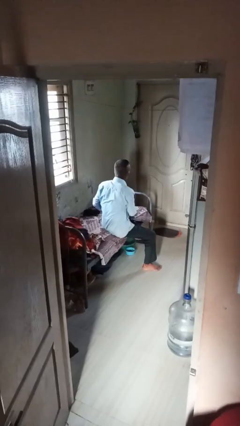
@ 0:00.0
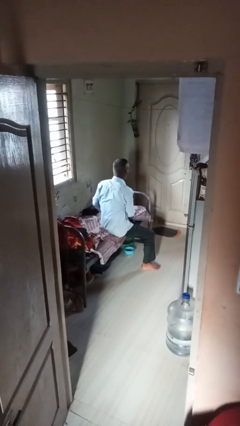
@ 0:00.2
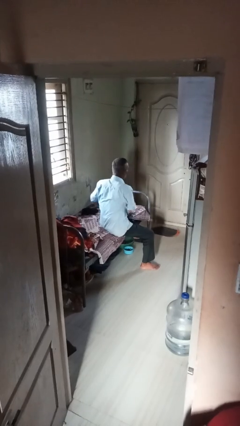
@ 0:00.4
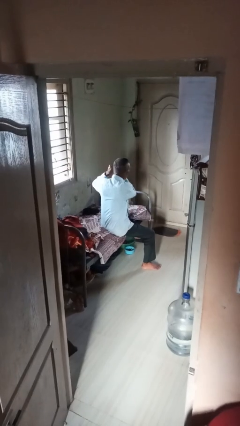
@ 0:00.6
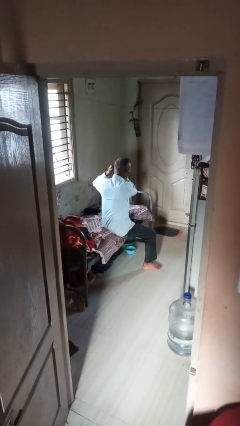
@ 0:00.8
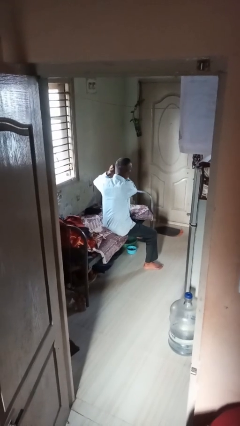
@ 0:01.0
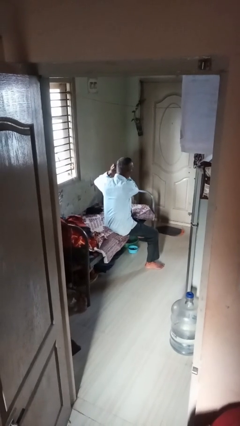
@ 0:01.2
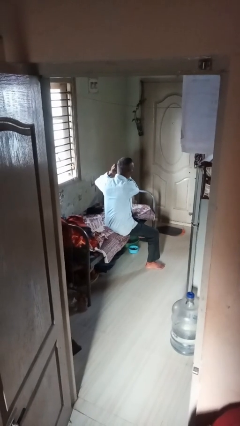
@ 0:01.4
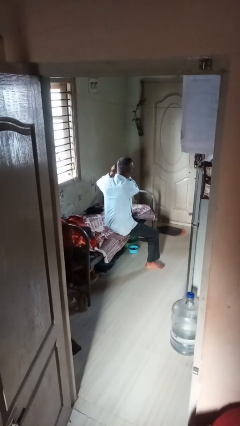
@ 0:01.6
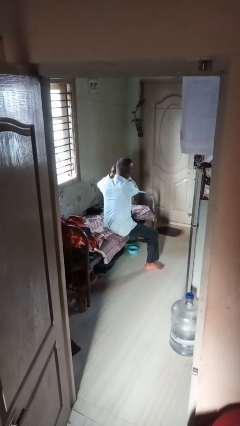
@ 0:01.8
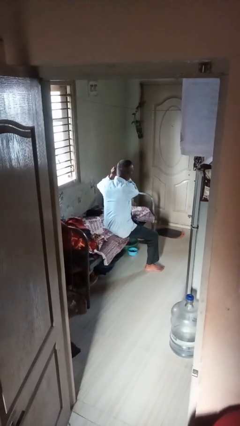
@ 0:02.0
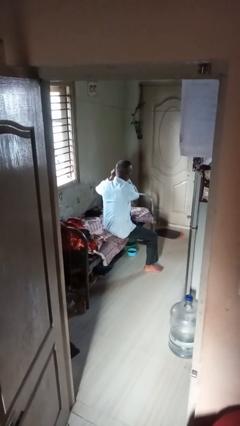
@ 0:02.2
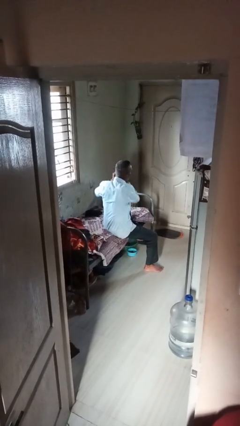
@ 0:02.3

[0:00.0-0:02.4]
person takes off earrings

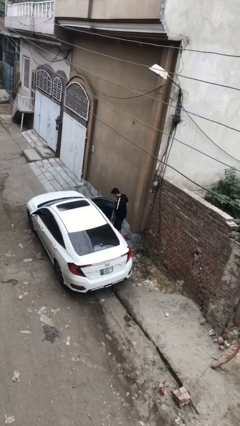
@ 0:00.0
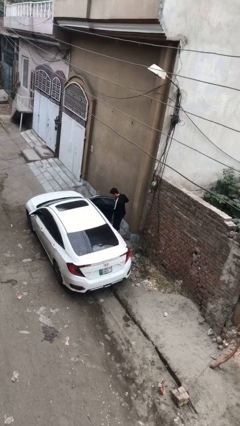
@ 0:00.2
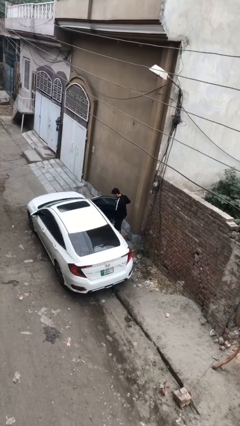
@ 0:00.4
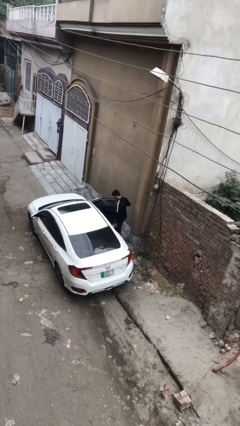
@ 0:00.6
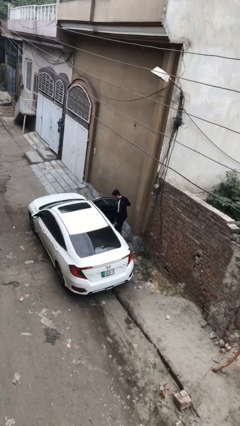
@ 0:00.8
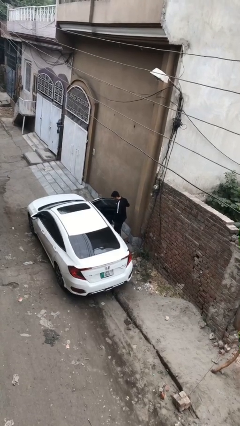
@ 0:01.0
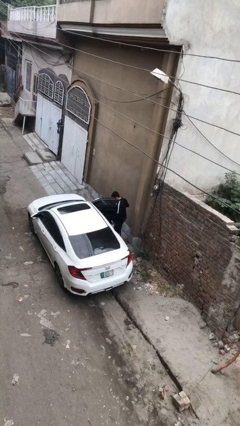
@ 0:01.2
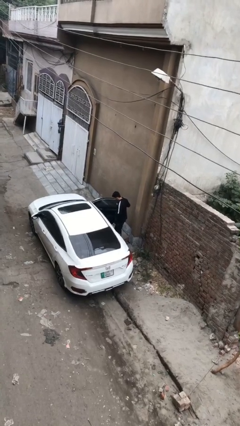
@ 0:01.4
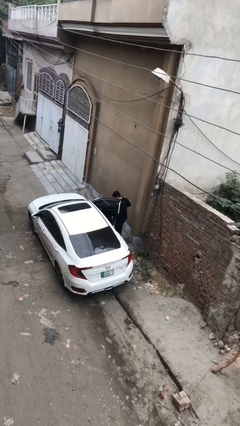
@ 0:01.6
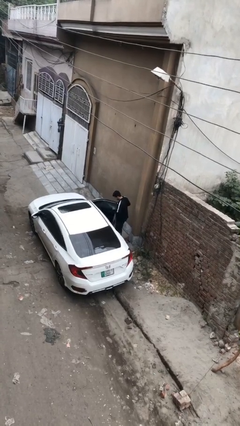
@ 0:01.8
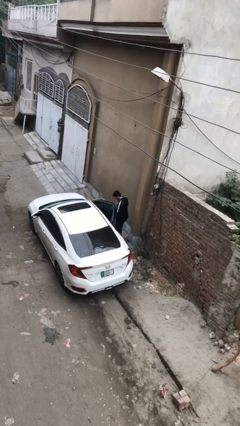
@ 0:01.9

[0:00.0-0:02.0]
person opens car door

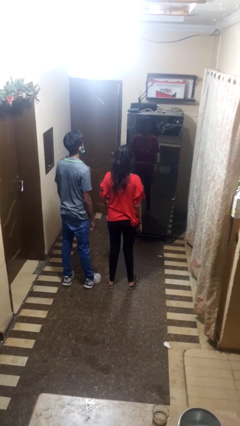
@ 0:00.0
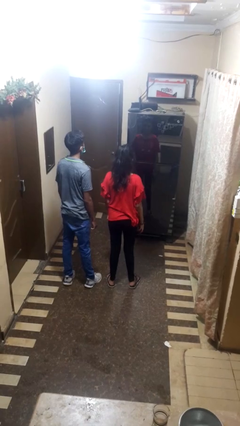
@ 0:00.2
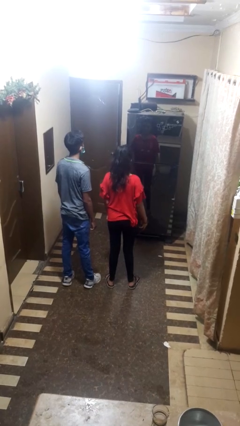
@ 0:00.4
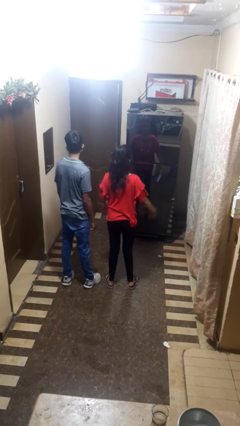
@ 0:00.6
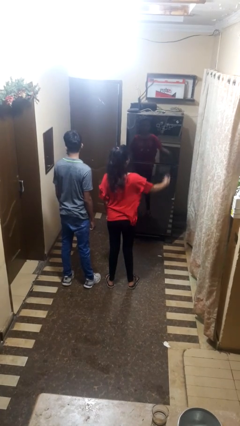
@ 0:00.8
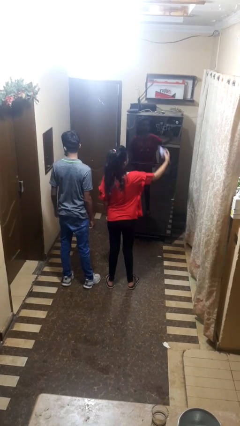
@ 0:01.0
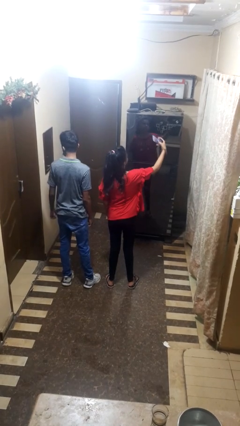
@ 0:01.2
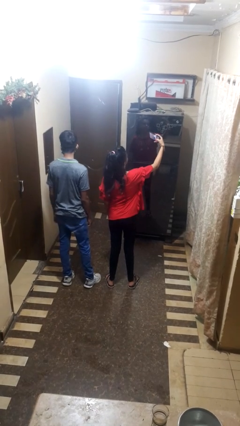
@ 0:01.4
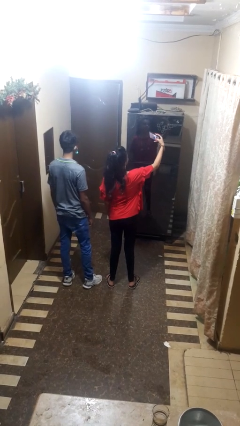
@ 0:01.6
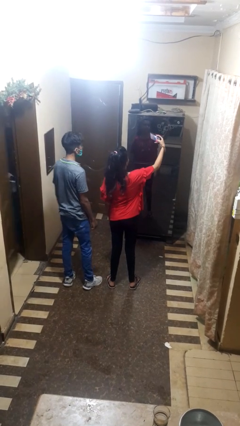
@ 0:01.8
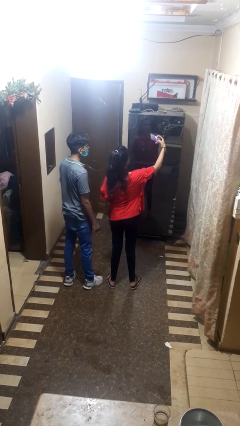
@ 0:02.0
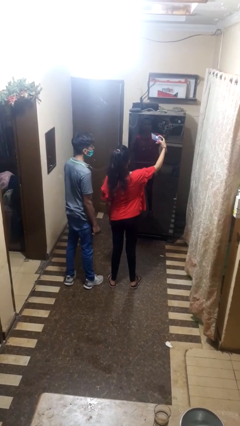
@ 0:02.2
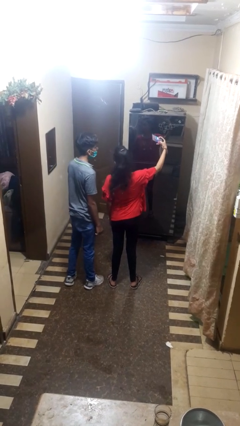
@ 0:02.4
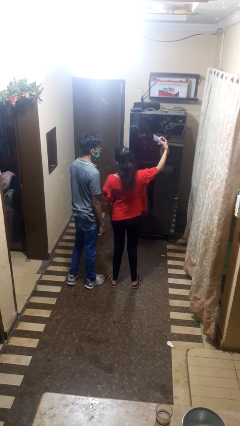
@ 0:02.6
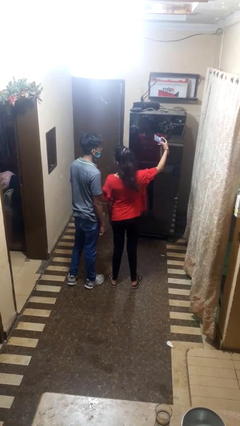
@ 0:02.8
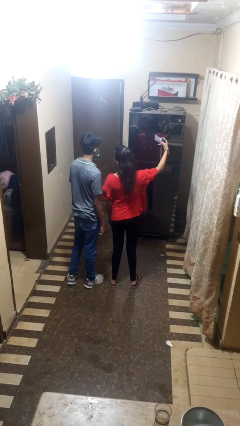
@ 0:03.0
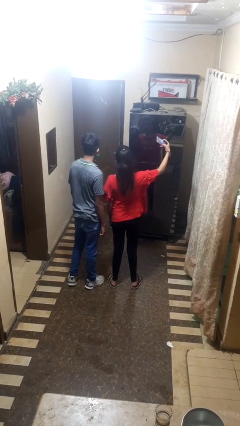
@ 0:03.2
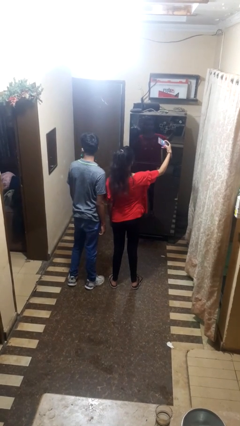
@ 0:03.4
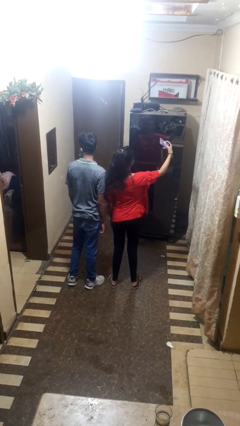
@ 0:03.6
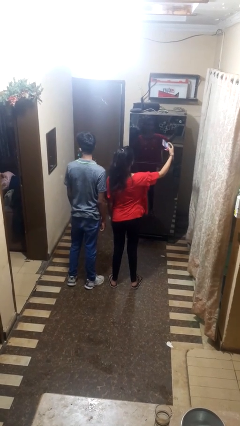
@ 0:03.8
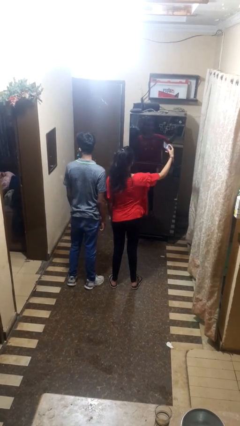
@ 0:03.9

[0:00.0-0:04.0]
person takes selfie with person

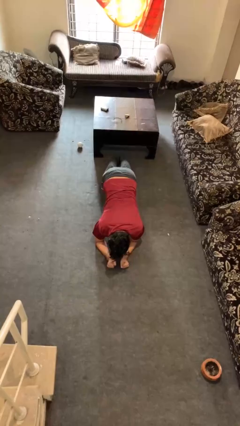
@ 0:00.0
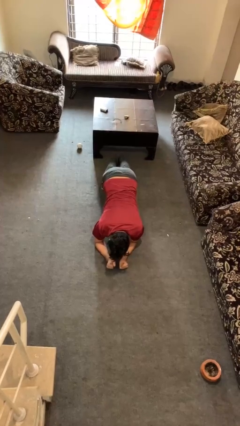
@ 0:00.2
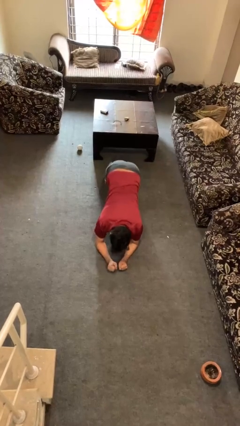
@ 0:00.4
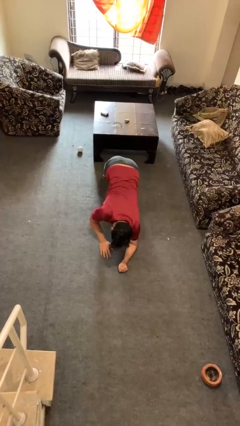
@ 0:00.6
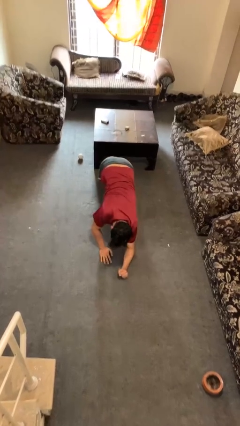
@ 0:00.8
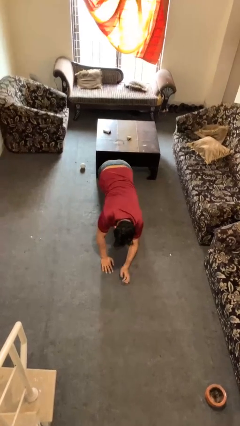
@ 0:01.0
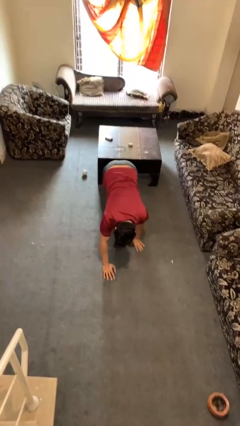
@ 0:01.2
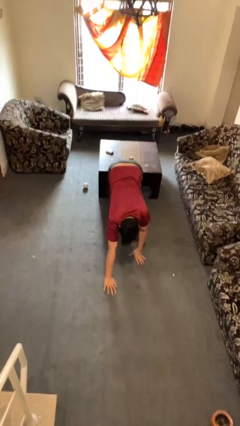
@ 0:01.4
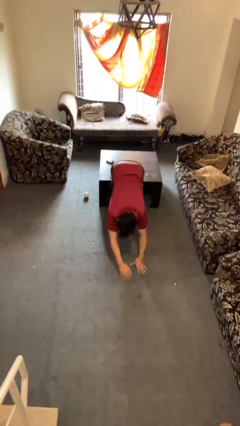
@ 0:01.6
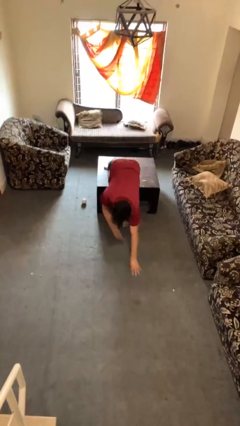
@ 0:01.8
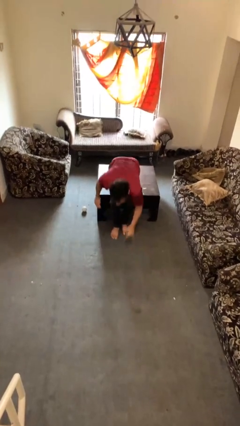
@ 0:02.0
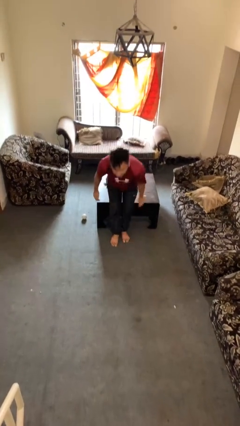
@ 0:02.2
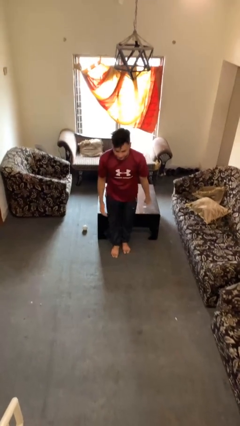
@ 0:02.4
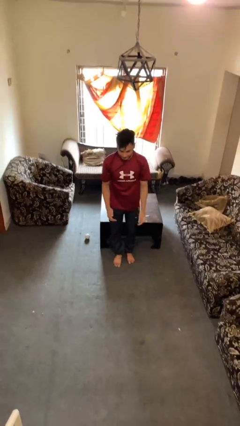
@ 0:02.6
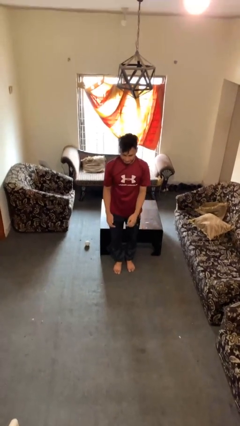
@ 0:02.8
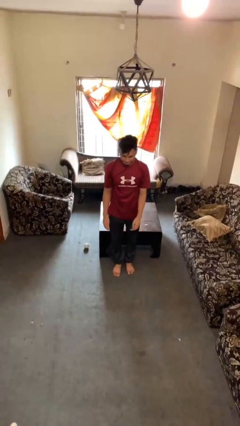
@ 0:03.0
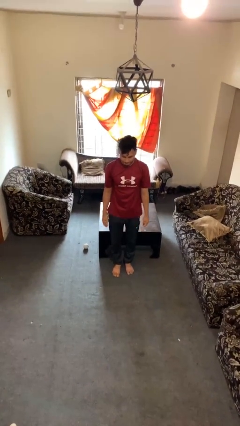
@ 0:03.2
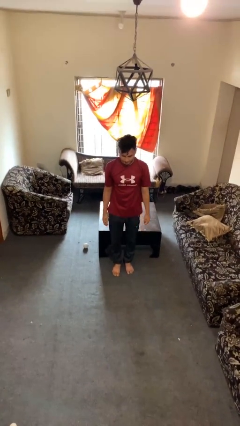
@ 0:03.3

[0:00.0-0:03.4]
person stands up from floor

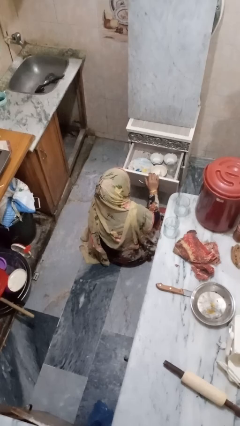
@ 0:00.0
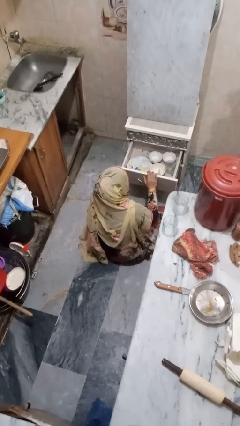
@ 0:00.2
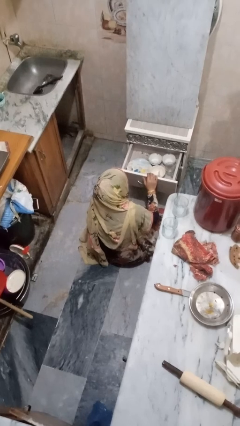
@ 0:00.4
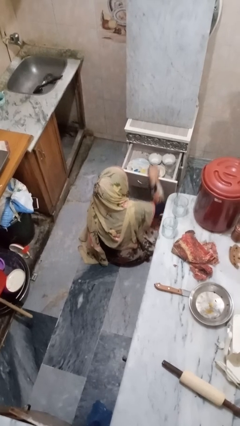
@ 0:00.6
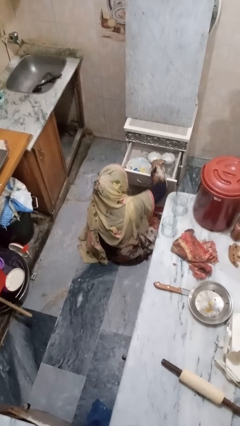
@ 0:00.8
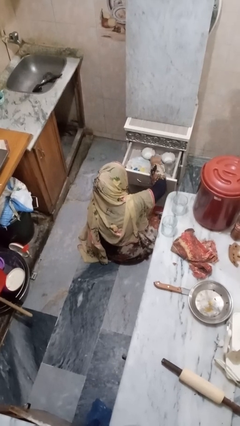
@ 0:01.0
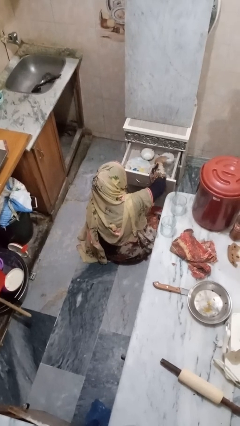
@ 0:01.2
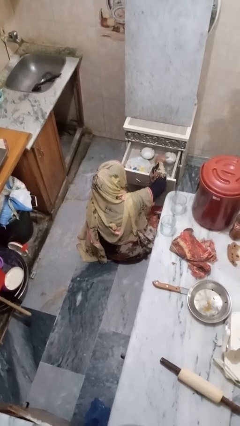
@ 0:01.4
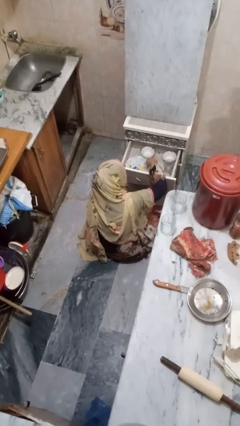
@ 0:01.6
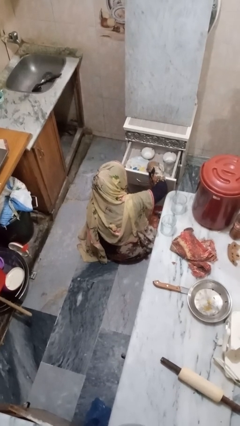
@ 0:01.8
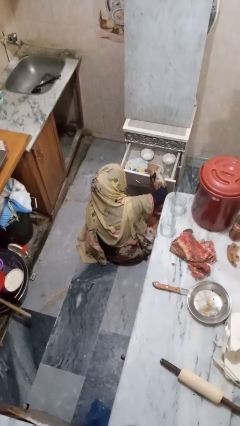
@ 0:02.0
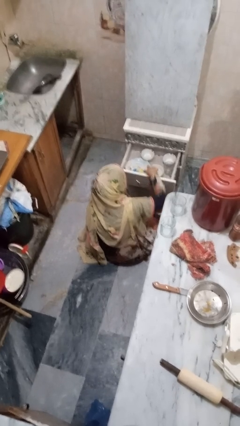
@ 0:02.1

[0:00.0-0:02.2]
person searches in kitchen drawer

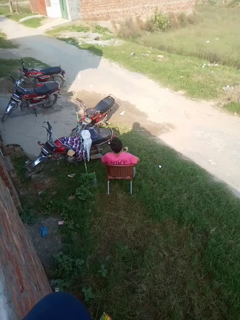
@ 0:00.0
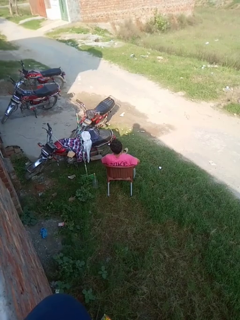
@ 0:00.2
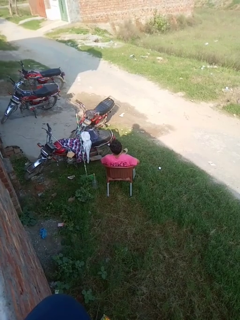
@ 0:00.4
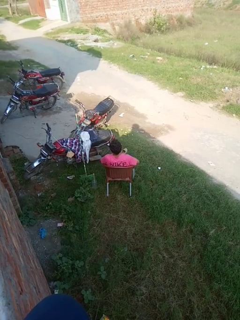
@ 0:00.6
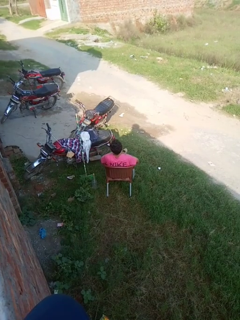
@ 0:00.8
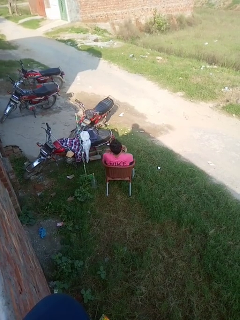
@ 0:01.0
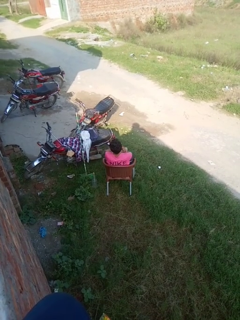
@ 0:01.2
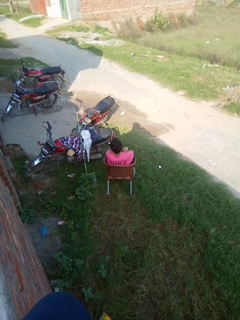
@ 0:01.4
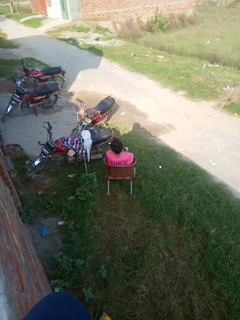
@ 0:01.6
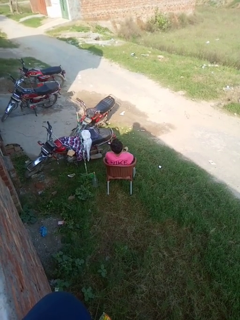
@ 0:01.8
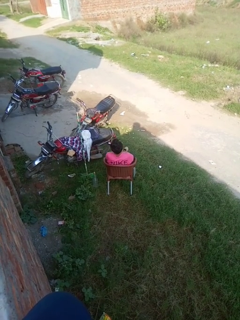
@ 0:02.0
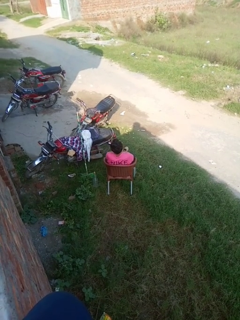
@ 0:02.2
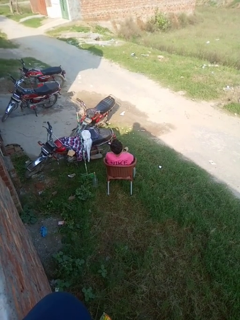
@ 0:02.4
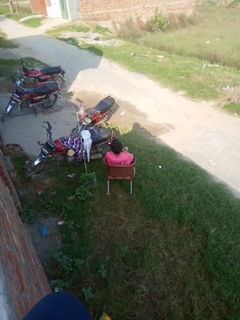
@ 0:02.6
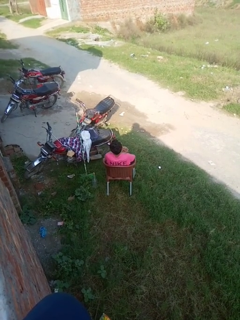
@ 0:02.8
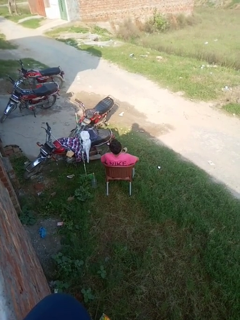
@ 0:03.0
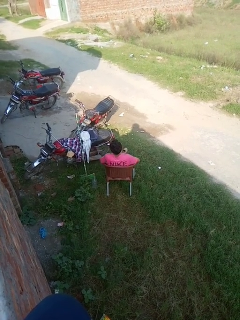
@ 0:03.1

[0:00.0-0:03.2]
person crosses arms

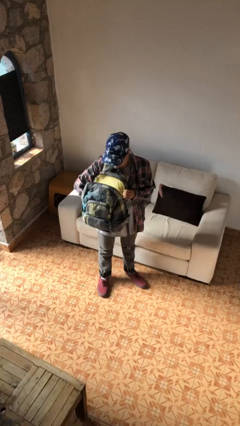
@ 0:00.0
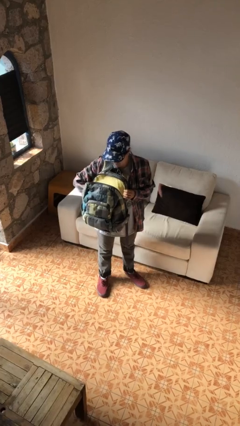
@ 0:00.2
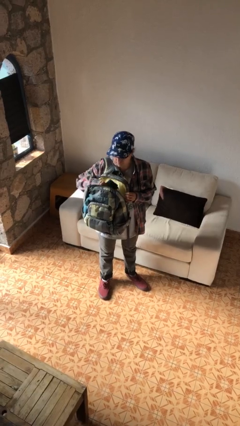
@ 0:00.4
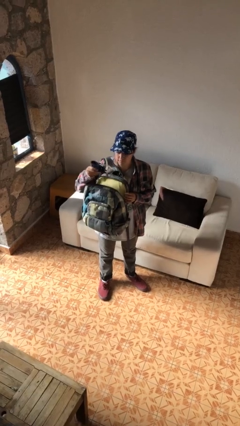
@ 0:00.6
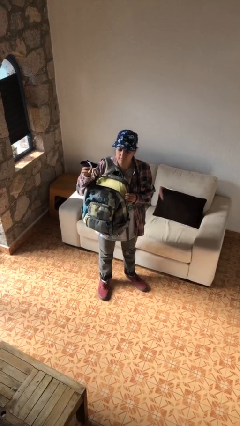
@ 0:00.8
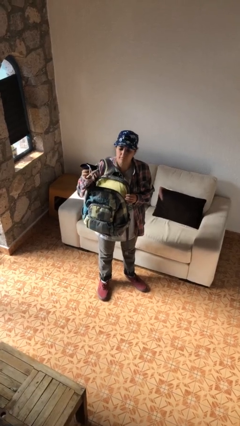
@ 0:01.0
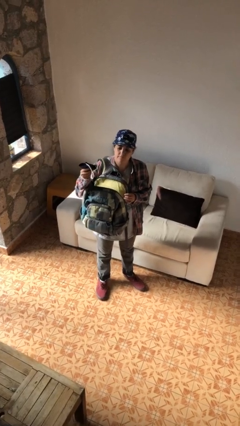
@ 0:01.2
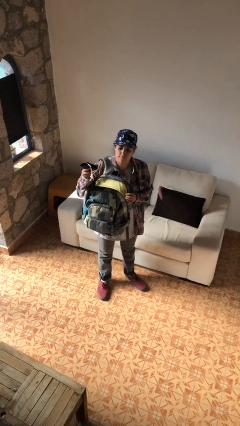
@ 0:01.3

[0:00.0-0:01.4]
person takes object from backpack
